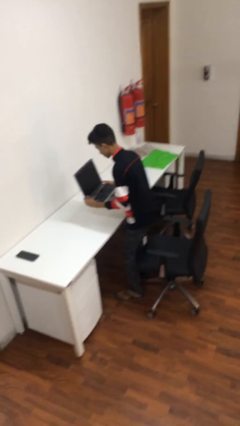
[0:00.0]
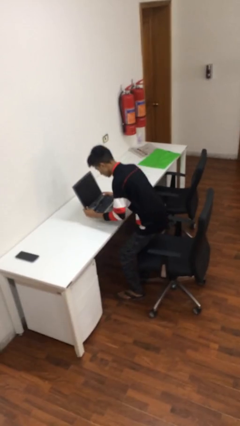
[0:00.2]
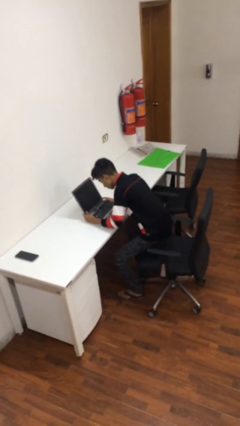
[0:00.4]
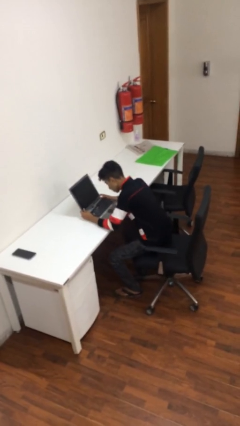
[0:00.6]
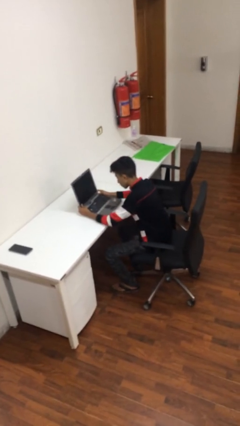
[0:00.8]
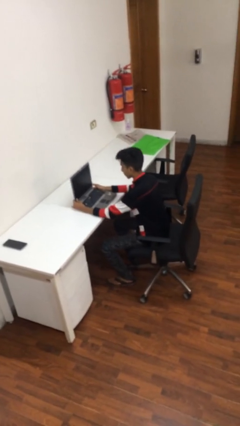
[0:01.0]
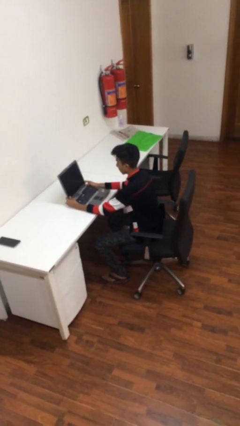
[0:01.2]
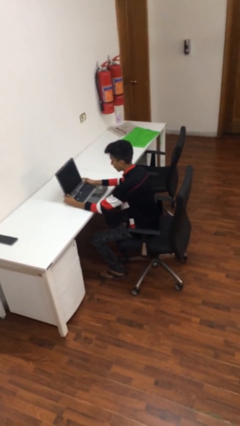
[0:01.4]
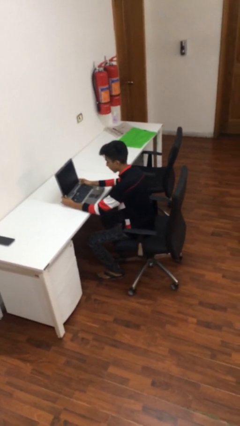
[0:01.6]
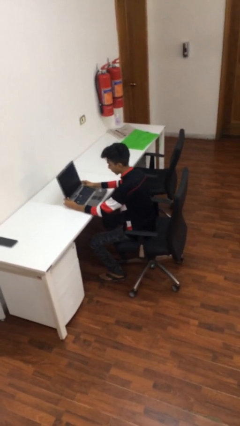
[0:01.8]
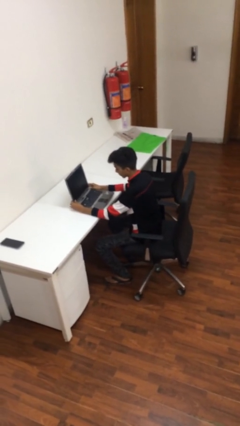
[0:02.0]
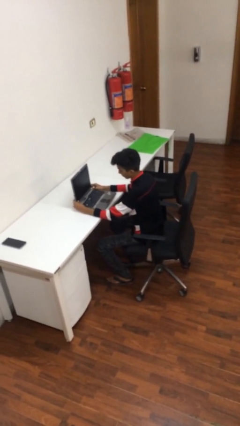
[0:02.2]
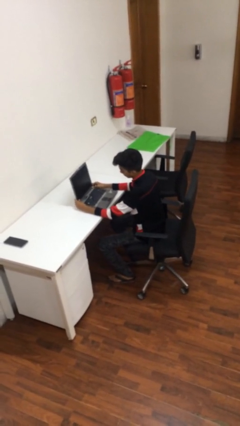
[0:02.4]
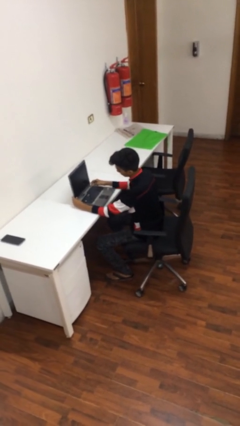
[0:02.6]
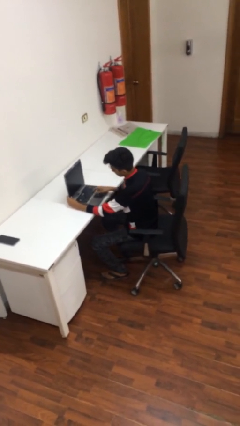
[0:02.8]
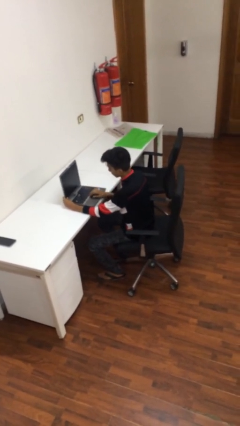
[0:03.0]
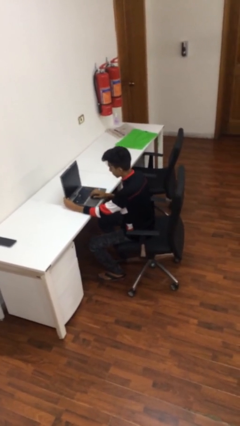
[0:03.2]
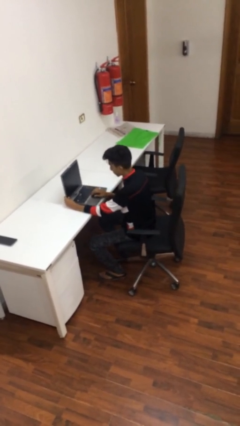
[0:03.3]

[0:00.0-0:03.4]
person sits down

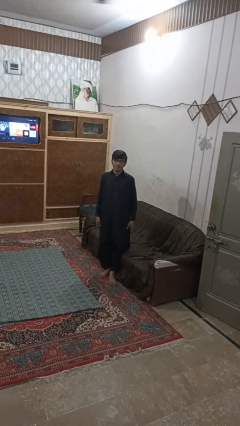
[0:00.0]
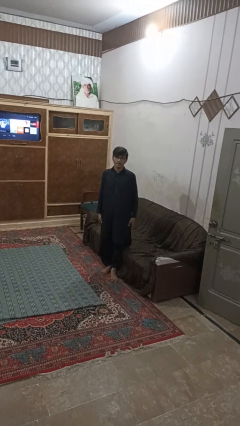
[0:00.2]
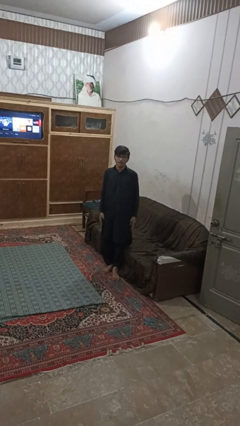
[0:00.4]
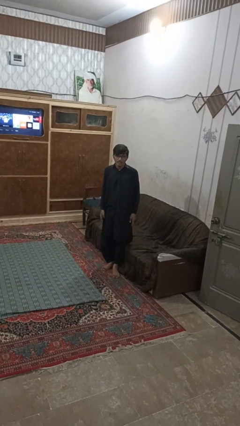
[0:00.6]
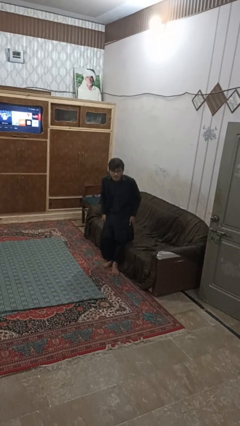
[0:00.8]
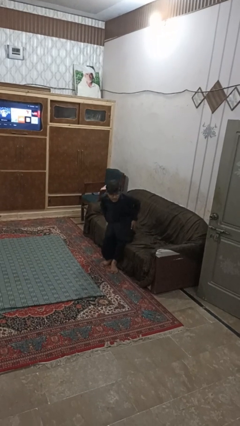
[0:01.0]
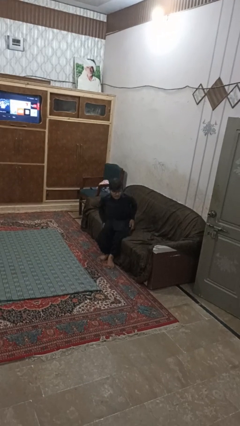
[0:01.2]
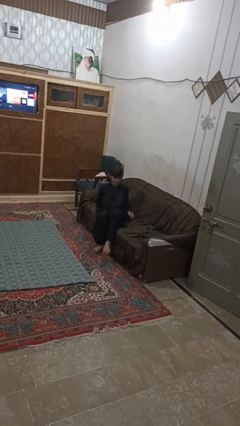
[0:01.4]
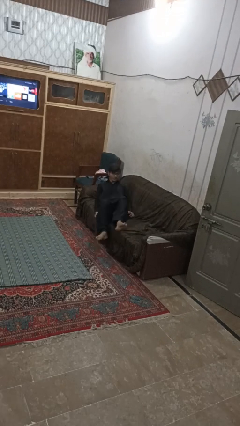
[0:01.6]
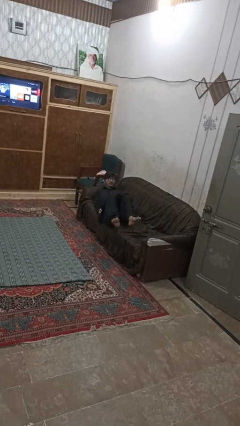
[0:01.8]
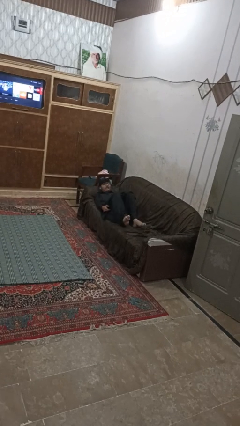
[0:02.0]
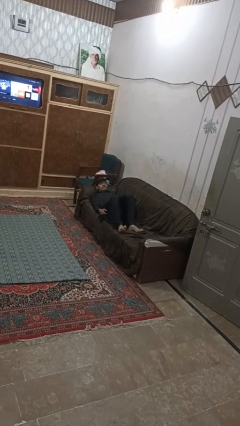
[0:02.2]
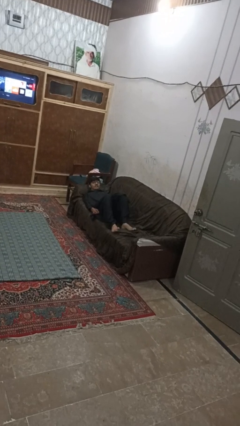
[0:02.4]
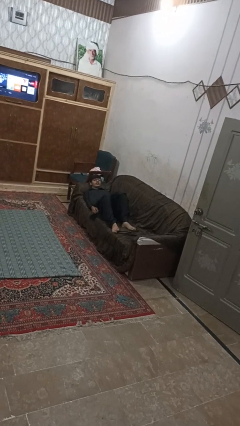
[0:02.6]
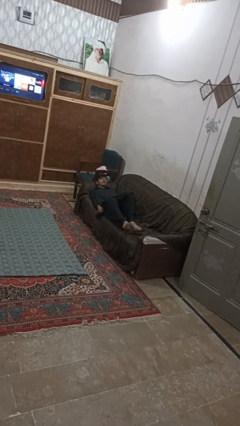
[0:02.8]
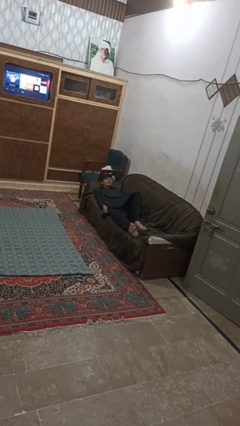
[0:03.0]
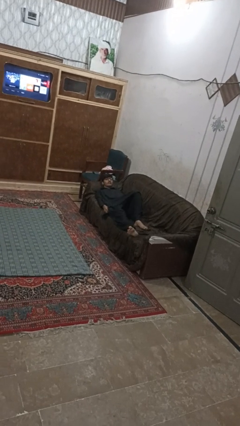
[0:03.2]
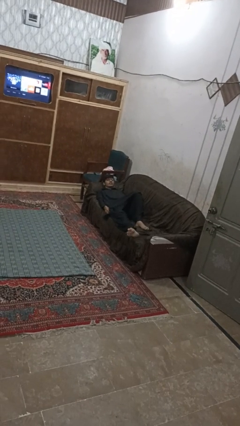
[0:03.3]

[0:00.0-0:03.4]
person lies down on couch

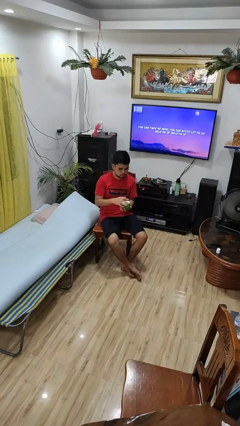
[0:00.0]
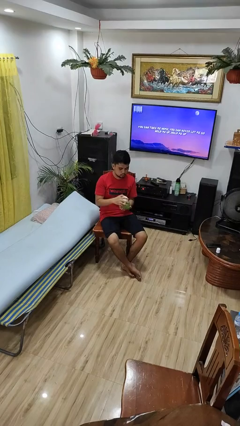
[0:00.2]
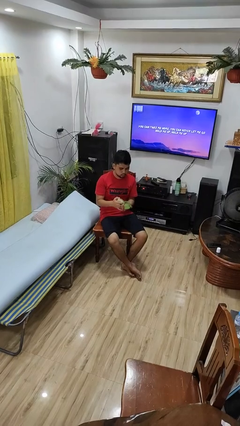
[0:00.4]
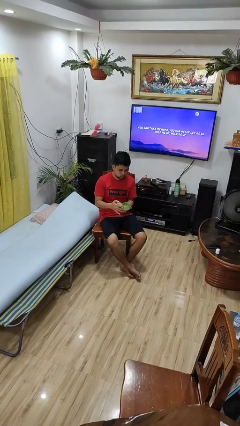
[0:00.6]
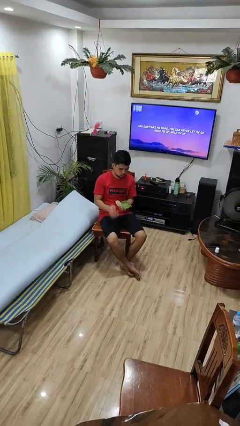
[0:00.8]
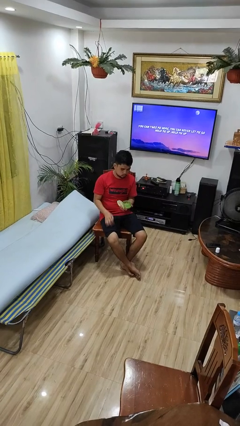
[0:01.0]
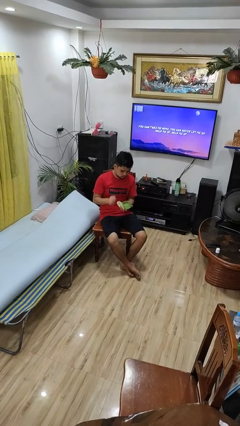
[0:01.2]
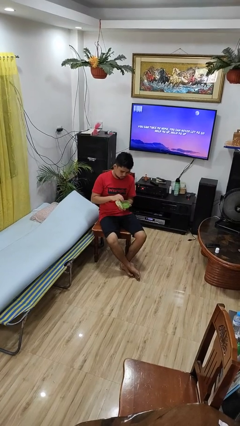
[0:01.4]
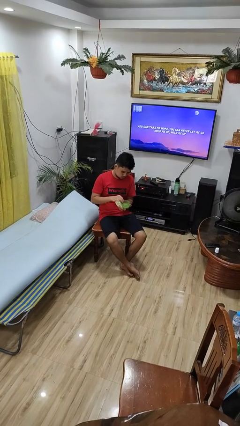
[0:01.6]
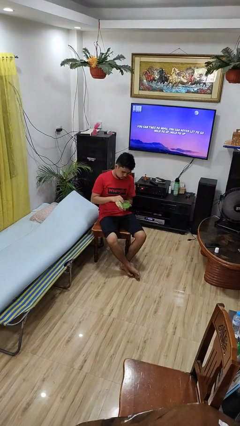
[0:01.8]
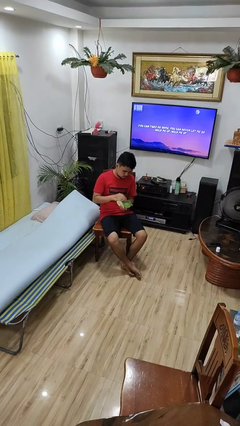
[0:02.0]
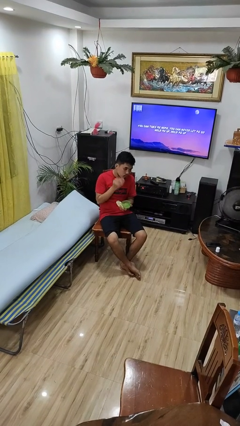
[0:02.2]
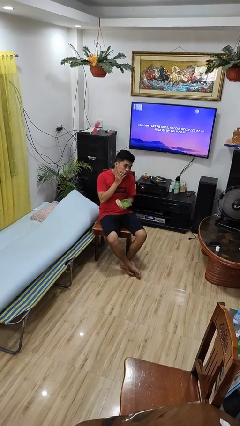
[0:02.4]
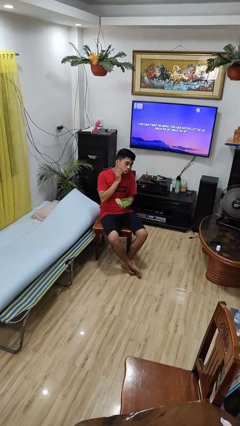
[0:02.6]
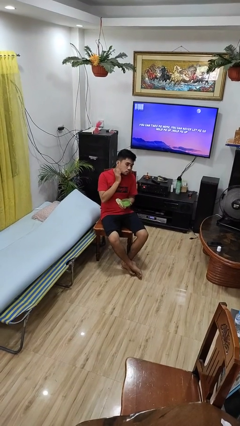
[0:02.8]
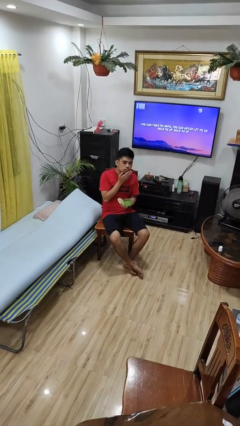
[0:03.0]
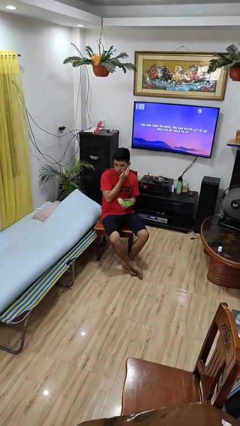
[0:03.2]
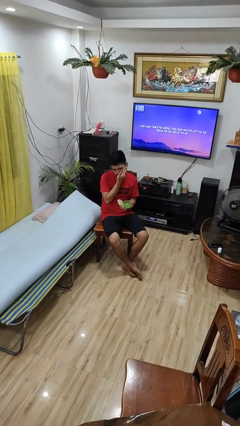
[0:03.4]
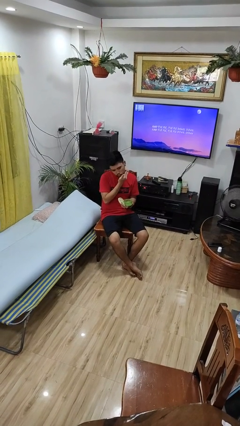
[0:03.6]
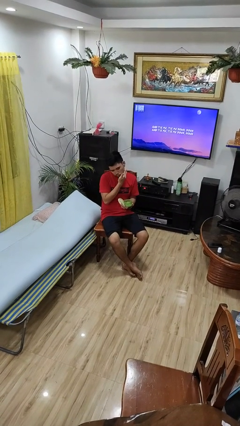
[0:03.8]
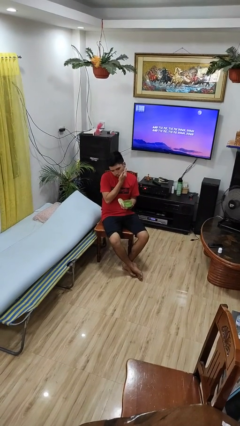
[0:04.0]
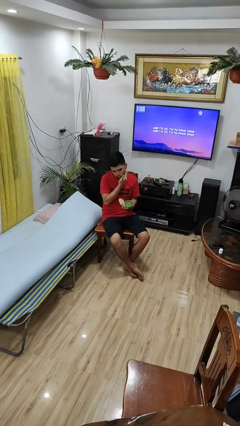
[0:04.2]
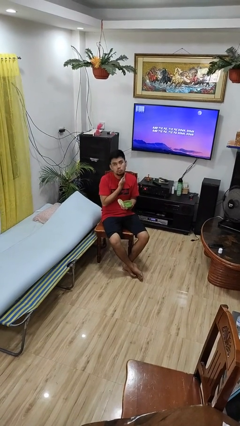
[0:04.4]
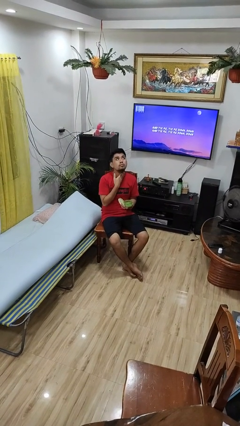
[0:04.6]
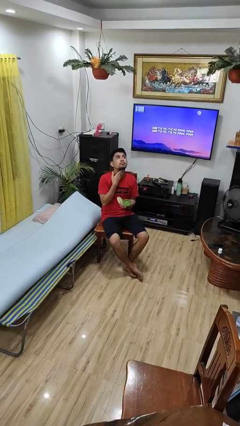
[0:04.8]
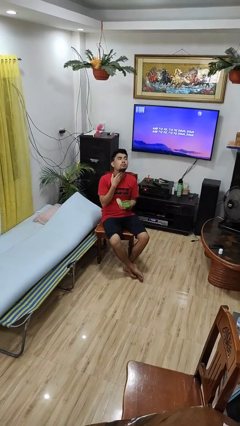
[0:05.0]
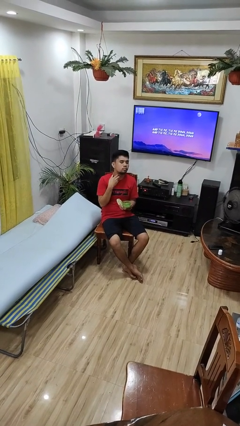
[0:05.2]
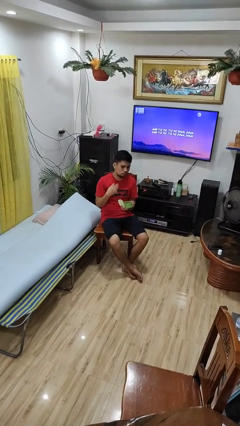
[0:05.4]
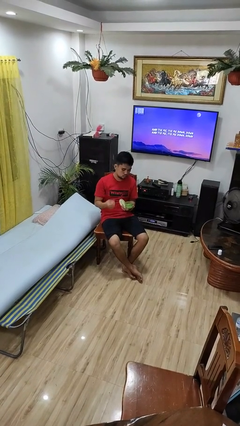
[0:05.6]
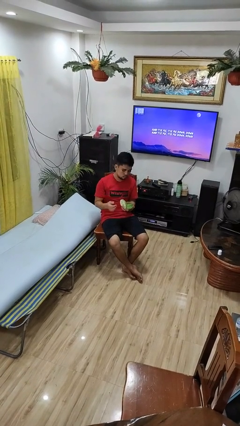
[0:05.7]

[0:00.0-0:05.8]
person applies facial moisturizer

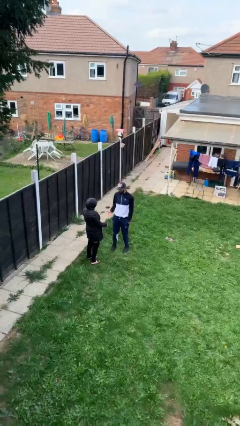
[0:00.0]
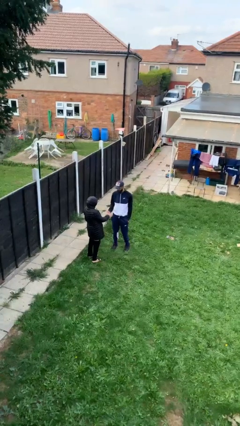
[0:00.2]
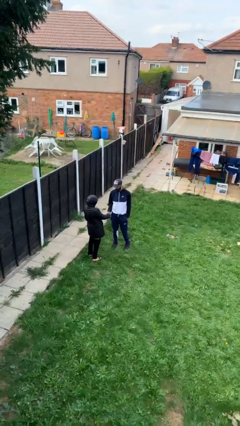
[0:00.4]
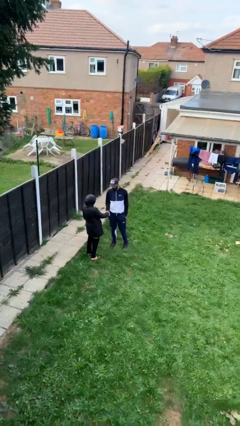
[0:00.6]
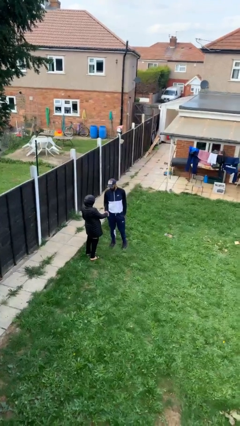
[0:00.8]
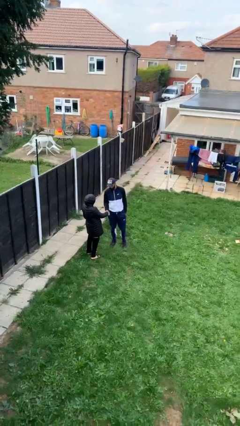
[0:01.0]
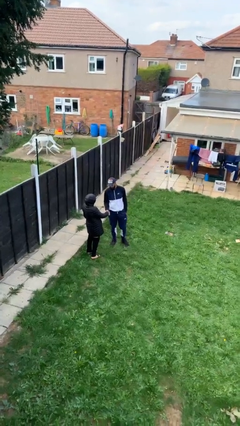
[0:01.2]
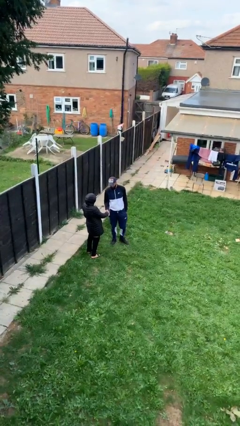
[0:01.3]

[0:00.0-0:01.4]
person shakes hand

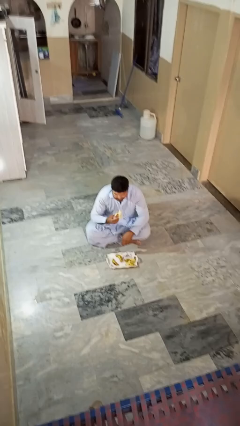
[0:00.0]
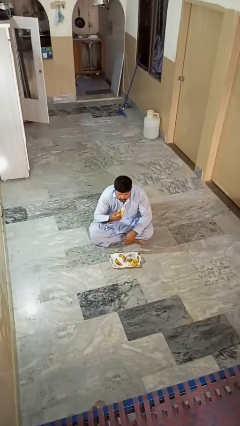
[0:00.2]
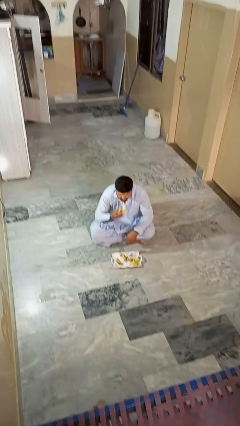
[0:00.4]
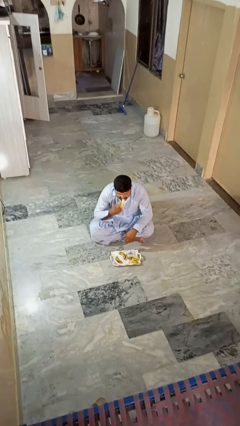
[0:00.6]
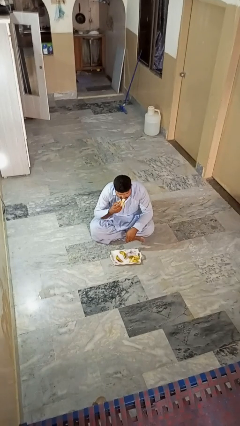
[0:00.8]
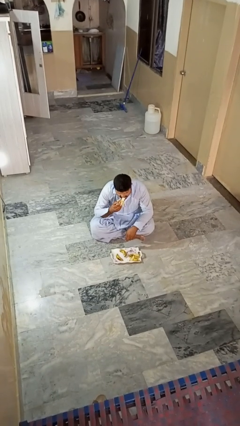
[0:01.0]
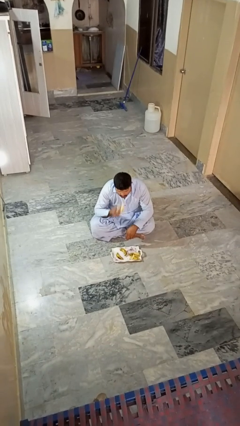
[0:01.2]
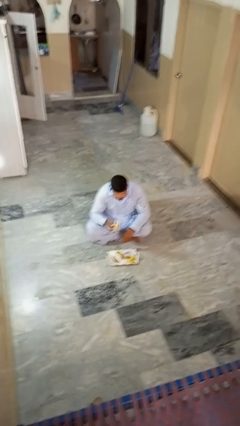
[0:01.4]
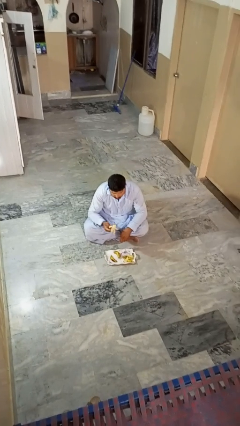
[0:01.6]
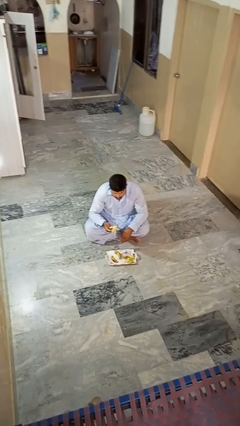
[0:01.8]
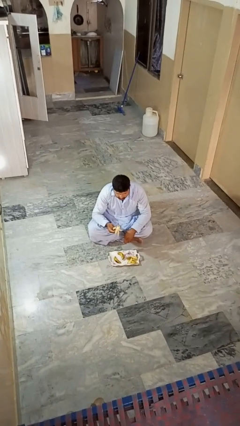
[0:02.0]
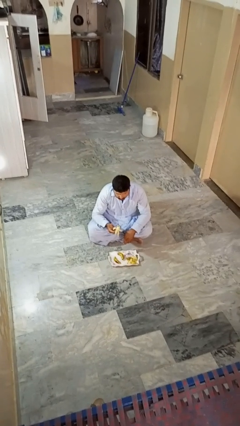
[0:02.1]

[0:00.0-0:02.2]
person eats banana

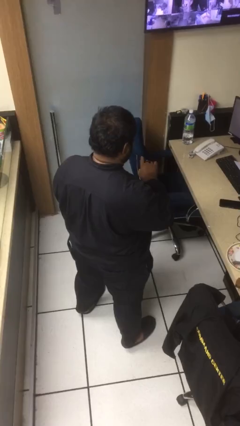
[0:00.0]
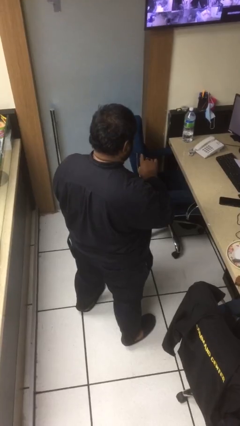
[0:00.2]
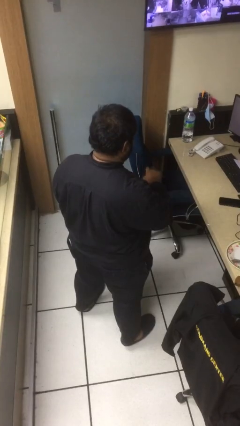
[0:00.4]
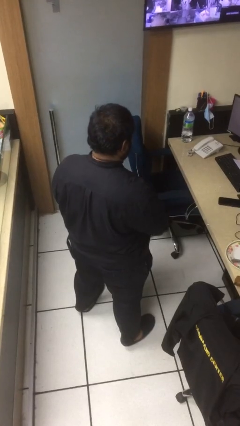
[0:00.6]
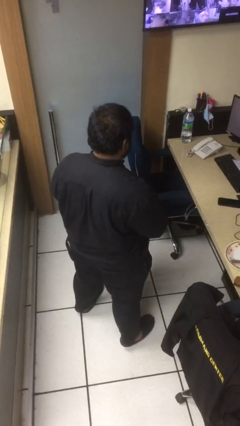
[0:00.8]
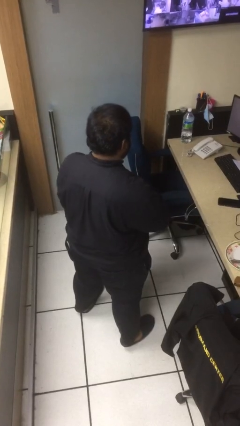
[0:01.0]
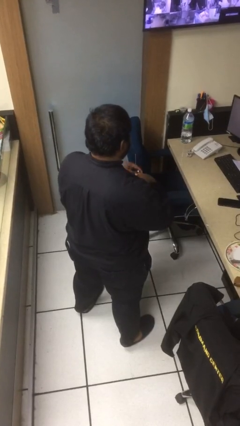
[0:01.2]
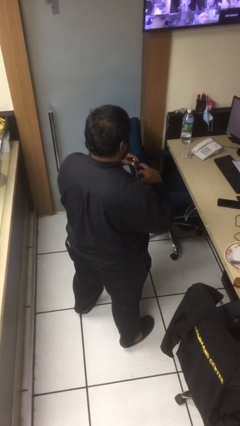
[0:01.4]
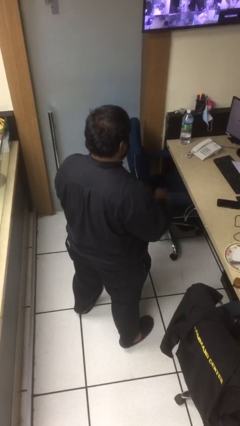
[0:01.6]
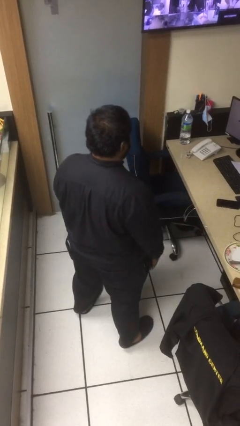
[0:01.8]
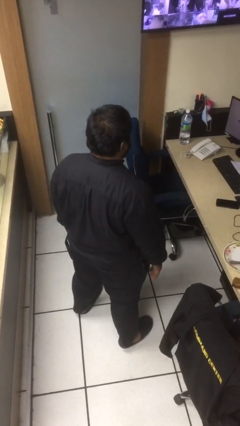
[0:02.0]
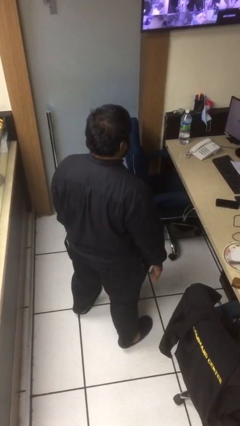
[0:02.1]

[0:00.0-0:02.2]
person takes off ring
